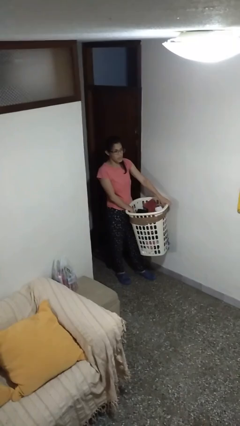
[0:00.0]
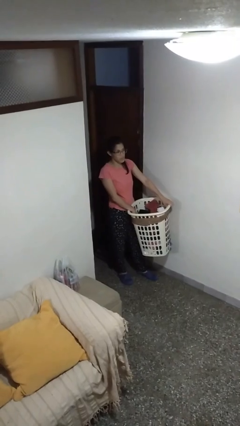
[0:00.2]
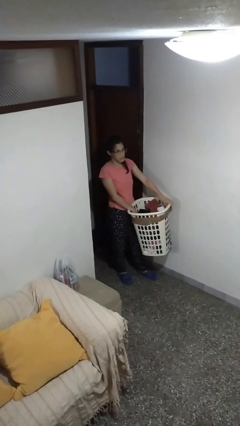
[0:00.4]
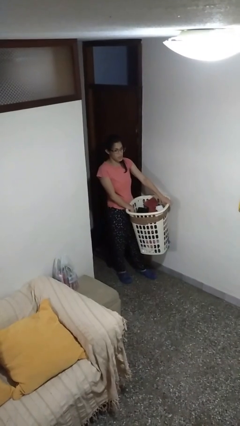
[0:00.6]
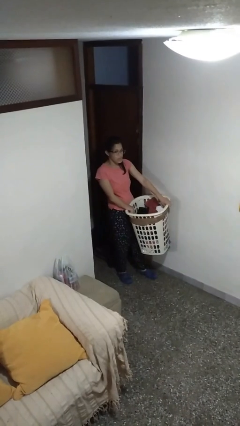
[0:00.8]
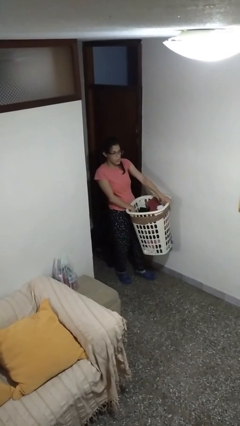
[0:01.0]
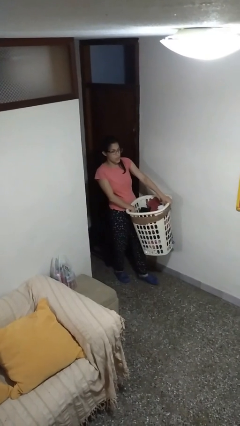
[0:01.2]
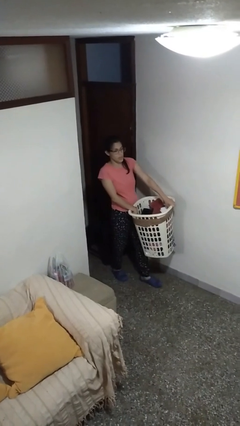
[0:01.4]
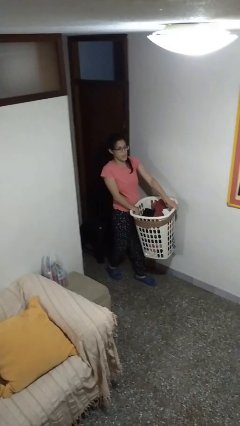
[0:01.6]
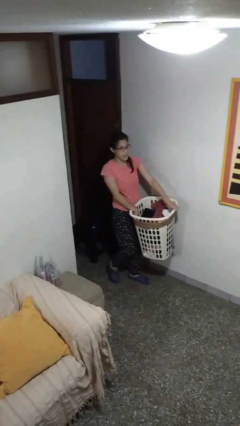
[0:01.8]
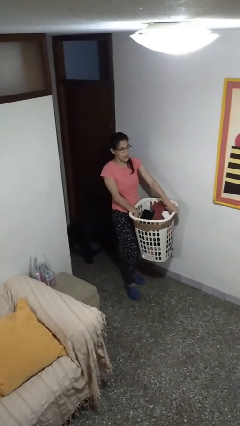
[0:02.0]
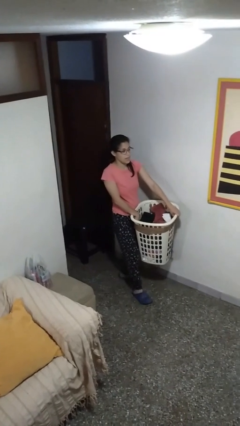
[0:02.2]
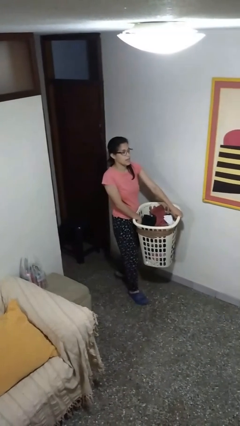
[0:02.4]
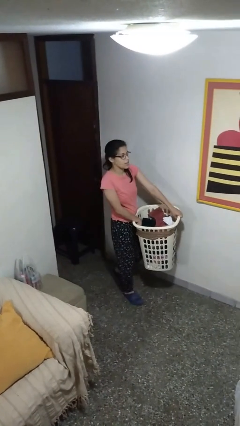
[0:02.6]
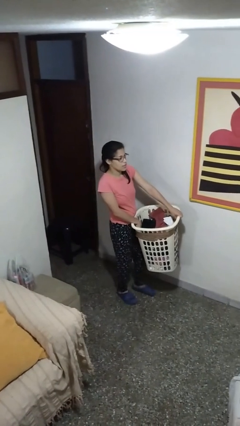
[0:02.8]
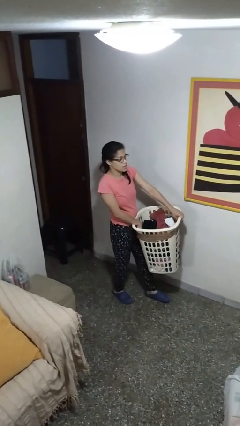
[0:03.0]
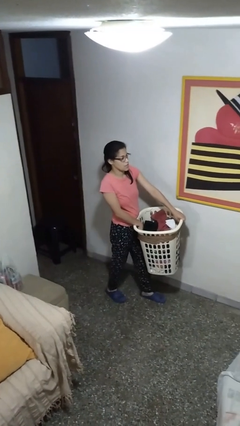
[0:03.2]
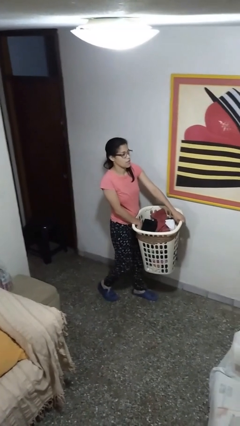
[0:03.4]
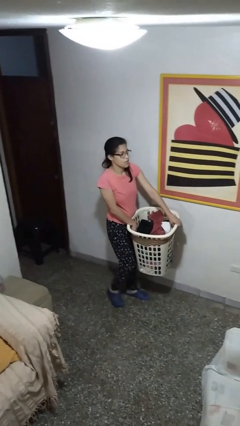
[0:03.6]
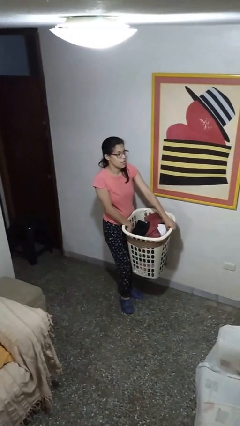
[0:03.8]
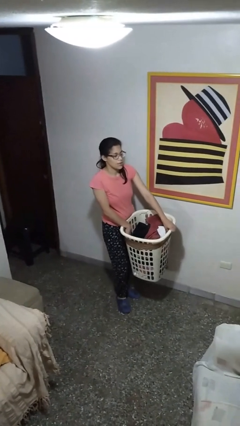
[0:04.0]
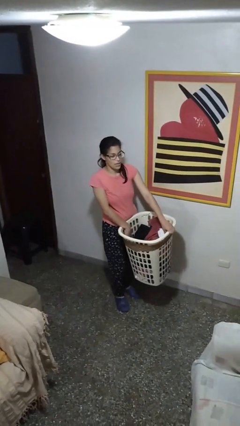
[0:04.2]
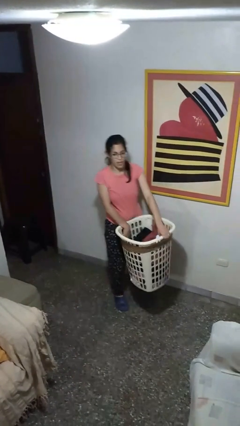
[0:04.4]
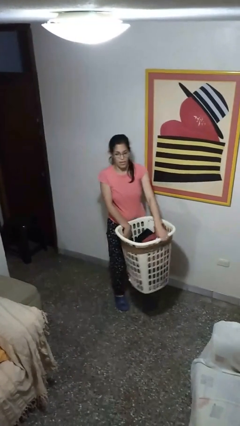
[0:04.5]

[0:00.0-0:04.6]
person carries laundry basket

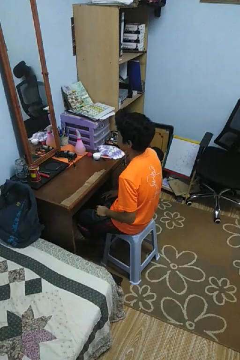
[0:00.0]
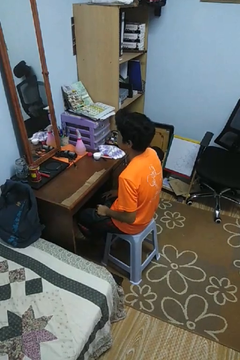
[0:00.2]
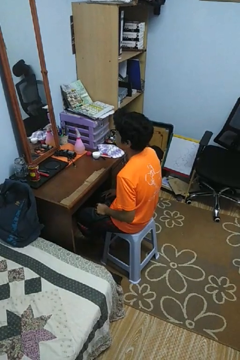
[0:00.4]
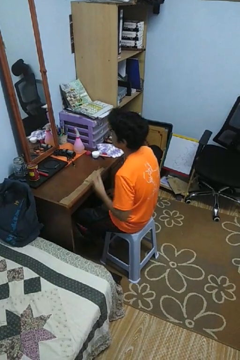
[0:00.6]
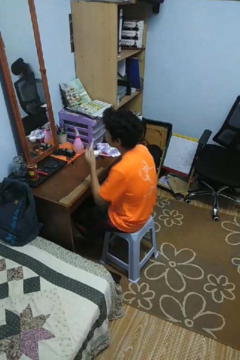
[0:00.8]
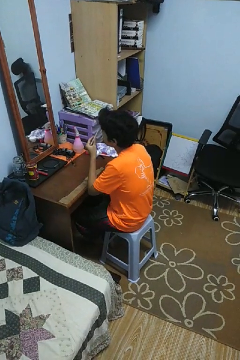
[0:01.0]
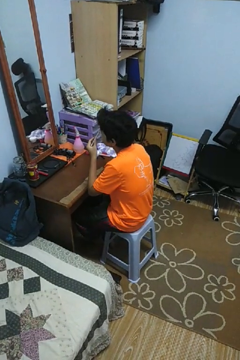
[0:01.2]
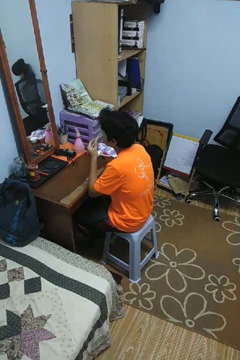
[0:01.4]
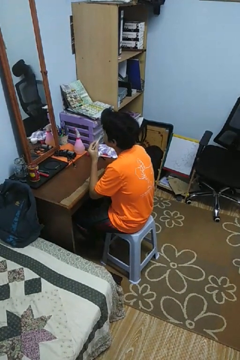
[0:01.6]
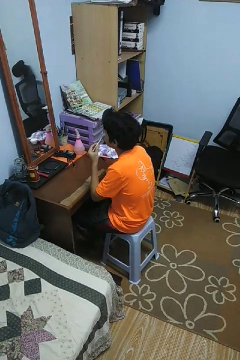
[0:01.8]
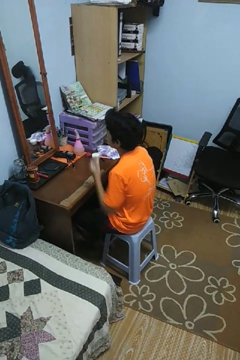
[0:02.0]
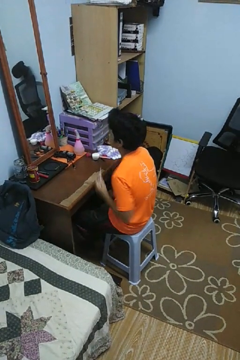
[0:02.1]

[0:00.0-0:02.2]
person applies eye makeup

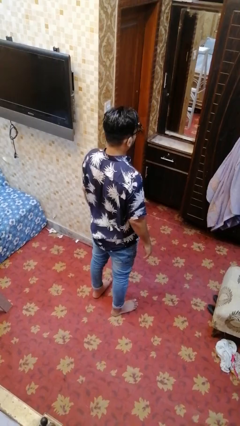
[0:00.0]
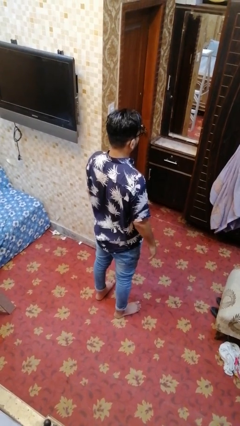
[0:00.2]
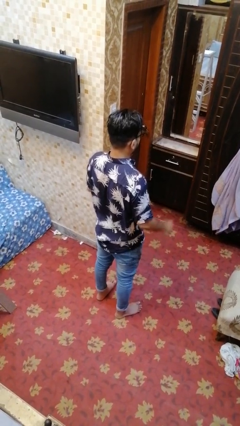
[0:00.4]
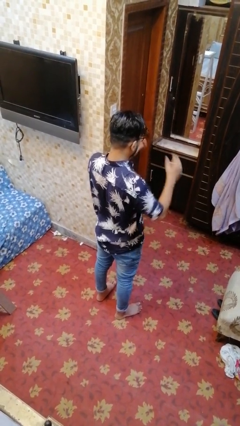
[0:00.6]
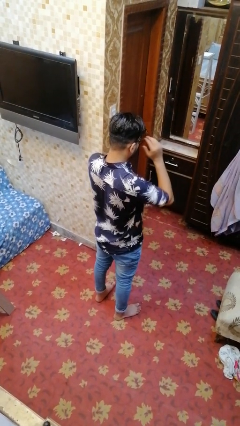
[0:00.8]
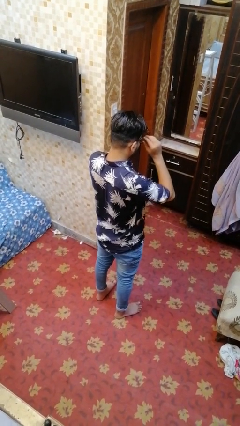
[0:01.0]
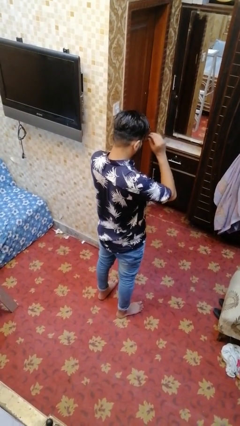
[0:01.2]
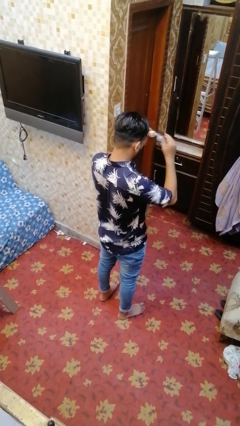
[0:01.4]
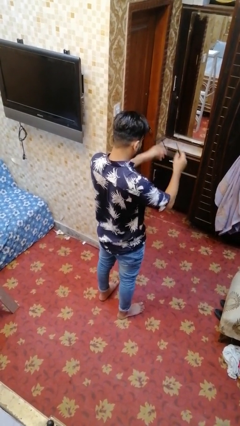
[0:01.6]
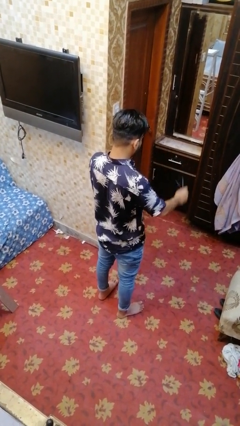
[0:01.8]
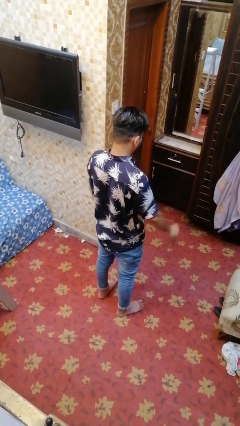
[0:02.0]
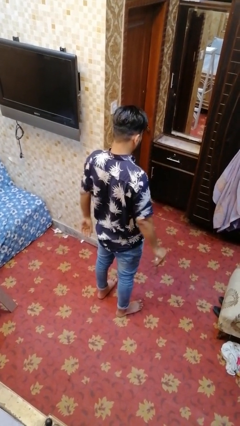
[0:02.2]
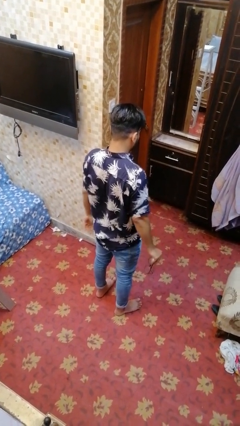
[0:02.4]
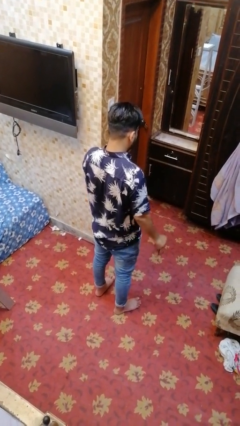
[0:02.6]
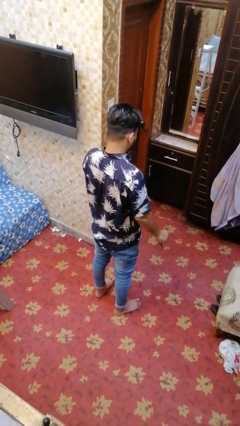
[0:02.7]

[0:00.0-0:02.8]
person takes off glasses

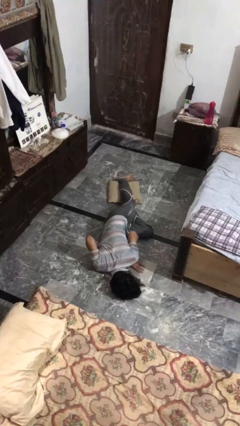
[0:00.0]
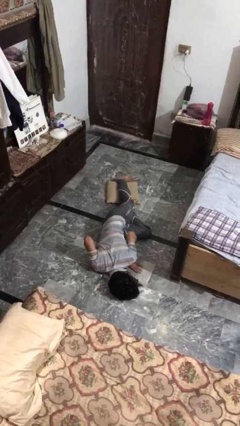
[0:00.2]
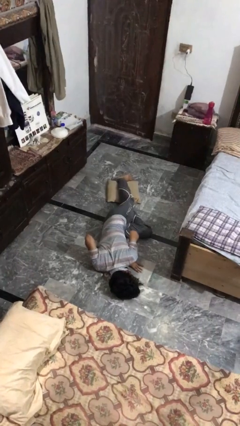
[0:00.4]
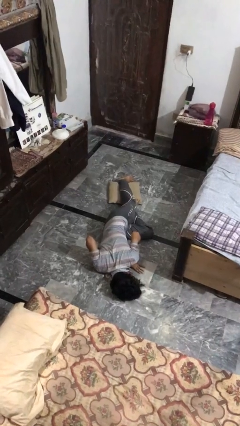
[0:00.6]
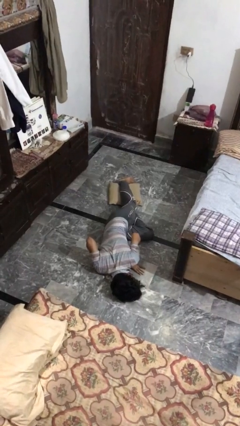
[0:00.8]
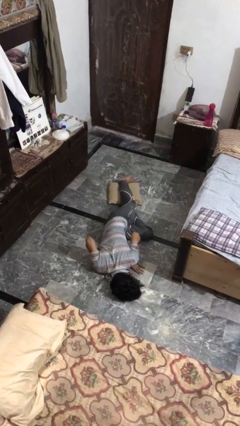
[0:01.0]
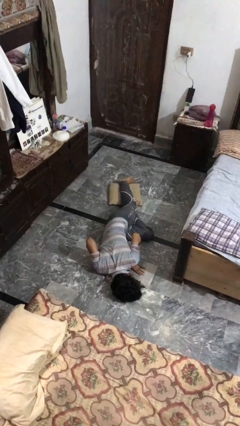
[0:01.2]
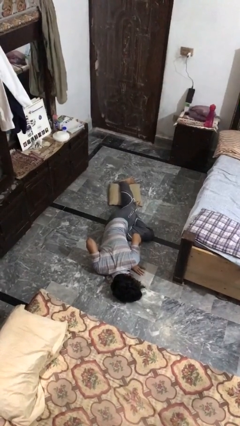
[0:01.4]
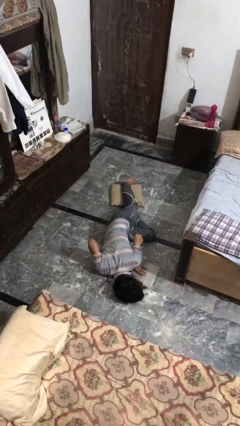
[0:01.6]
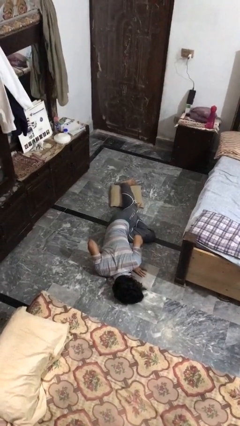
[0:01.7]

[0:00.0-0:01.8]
person lies down on floor

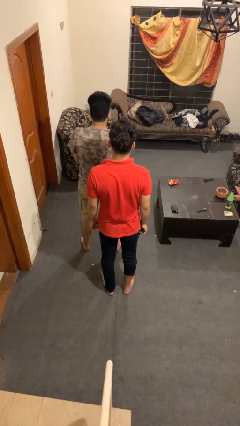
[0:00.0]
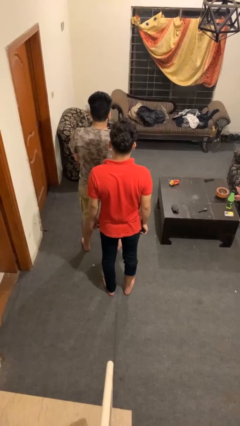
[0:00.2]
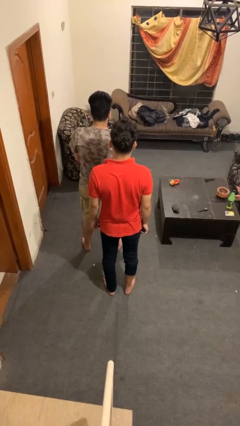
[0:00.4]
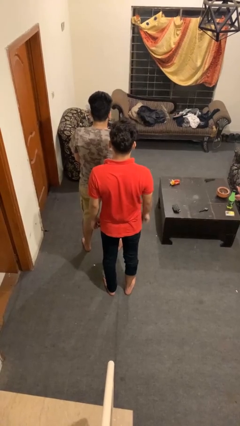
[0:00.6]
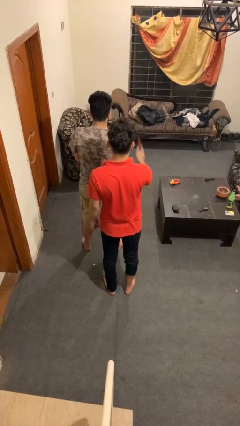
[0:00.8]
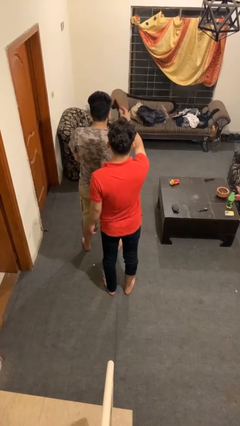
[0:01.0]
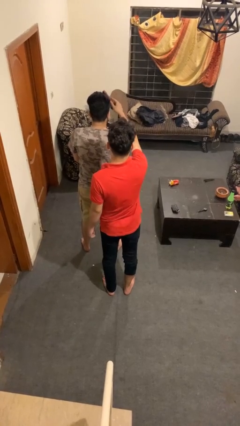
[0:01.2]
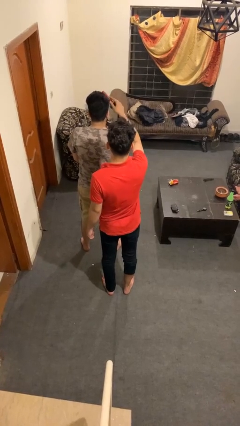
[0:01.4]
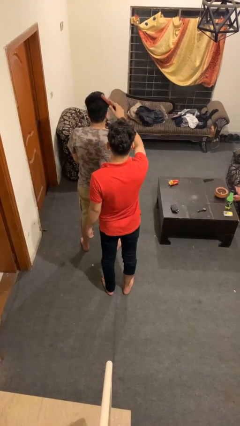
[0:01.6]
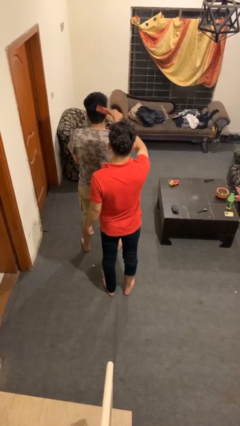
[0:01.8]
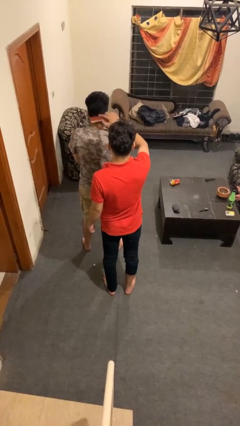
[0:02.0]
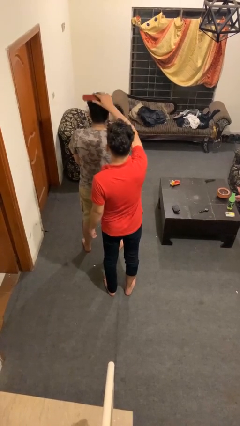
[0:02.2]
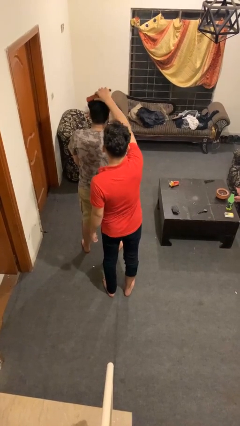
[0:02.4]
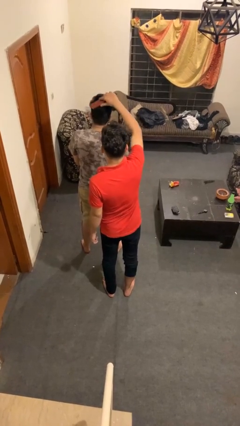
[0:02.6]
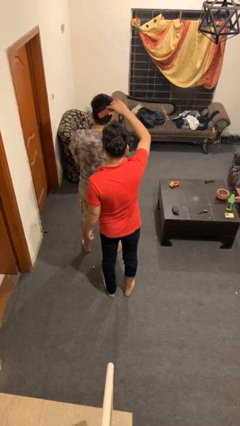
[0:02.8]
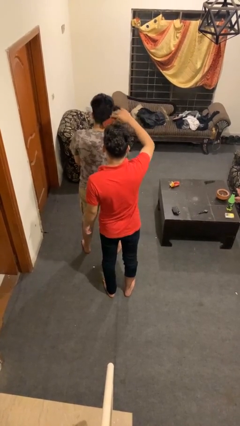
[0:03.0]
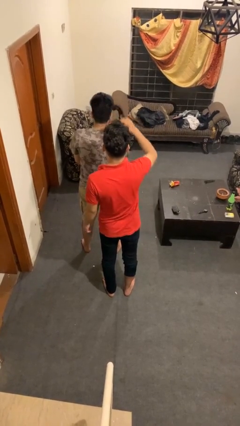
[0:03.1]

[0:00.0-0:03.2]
person brushes hair of person

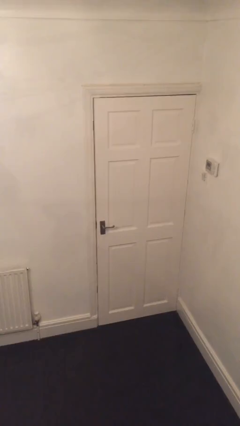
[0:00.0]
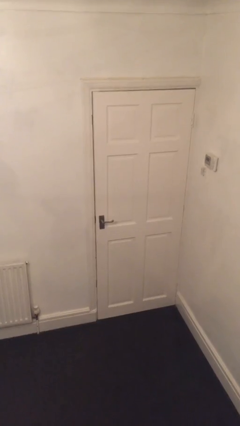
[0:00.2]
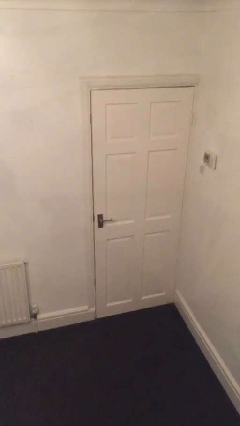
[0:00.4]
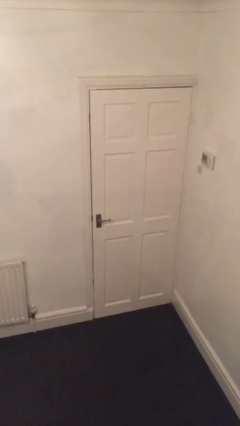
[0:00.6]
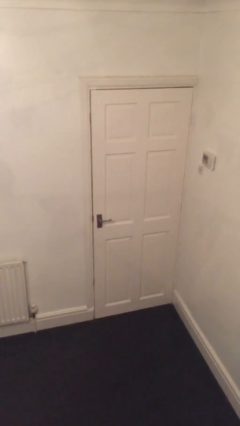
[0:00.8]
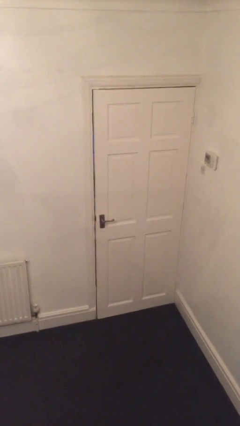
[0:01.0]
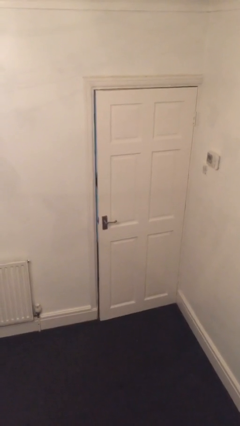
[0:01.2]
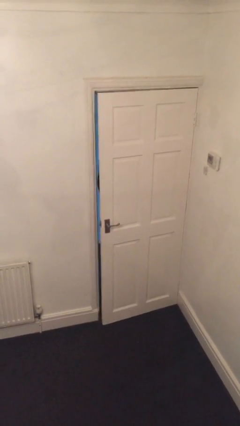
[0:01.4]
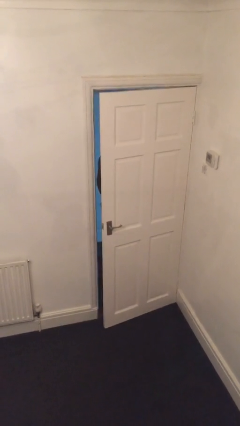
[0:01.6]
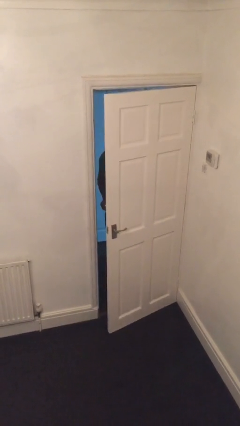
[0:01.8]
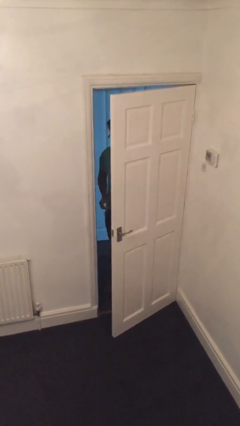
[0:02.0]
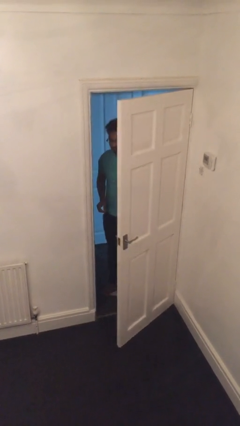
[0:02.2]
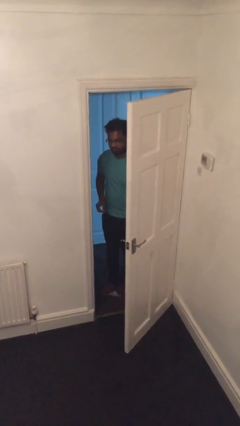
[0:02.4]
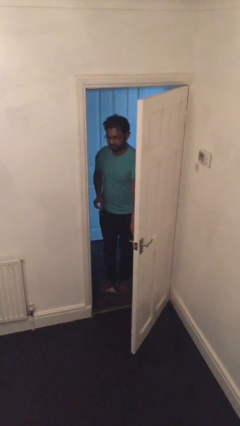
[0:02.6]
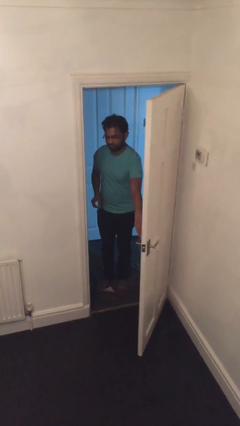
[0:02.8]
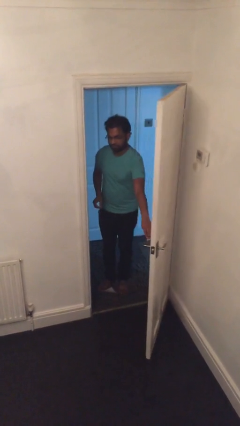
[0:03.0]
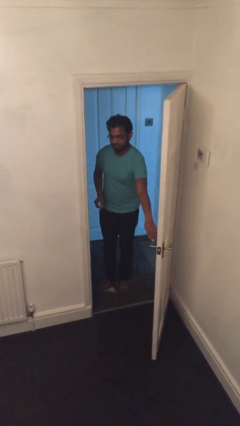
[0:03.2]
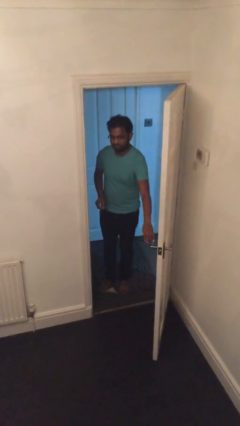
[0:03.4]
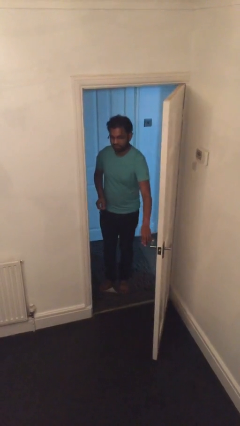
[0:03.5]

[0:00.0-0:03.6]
person opens facility door
